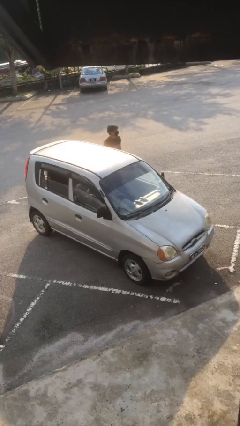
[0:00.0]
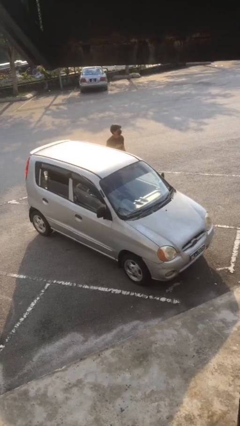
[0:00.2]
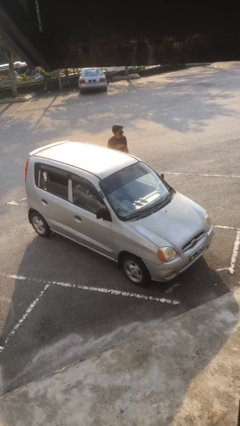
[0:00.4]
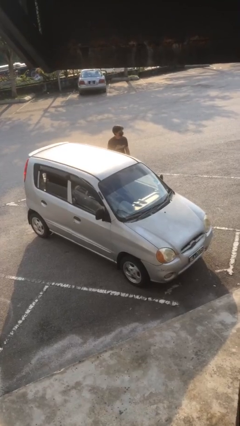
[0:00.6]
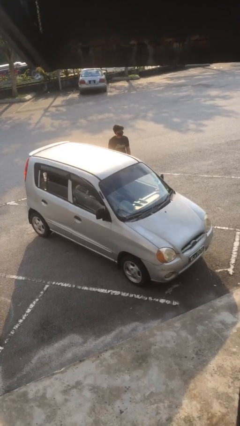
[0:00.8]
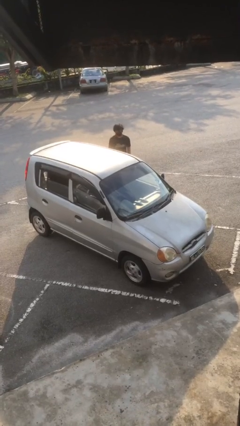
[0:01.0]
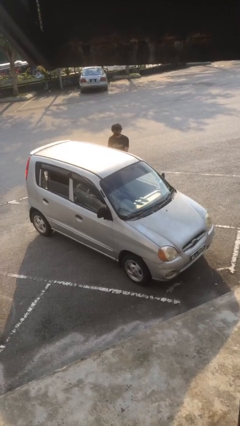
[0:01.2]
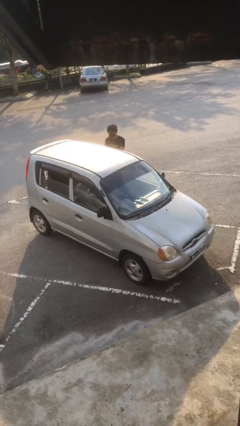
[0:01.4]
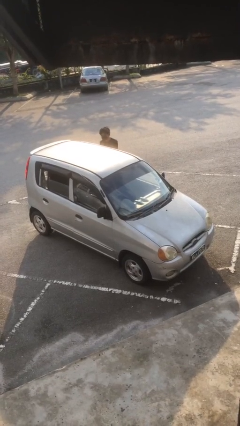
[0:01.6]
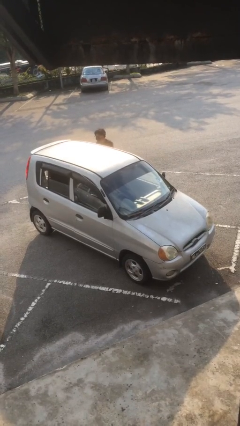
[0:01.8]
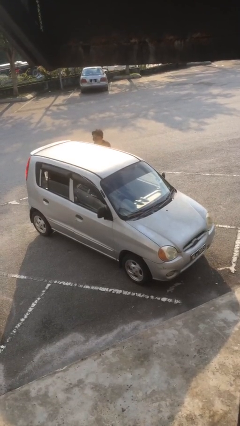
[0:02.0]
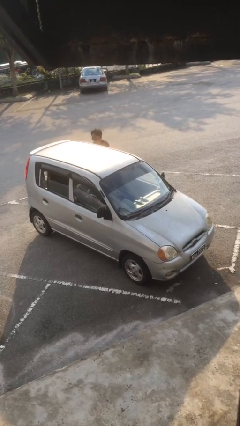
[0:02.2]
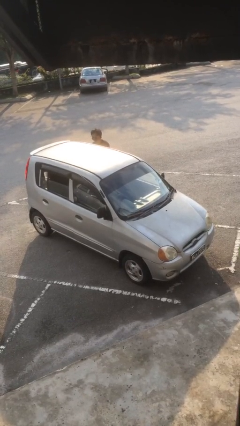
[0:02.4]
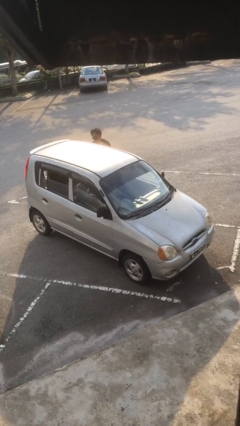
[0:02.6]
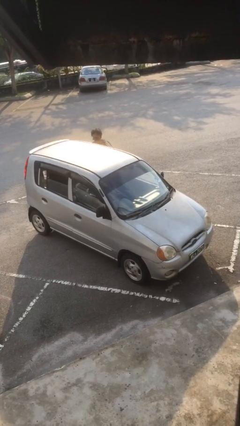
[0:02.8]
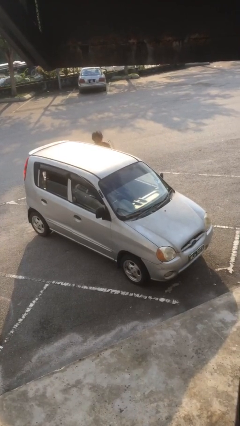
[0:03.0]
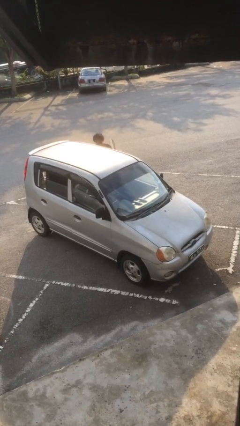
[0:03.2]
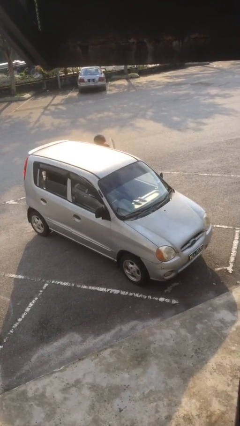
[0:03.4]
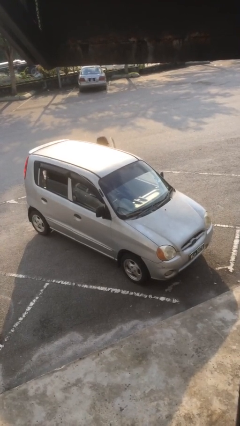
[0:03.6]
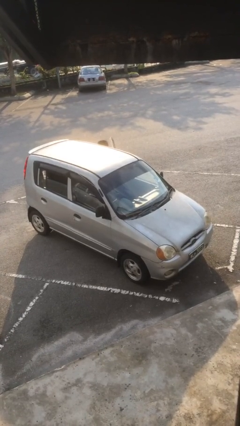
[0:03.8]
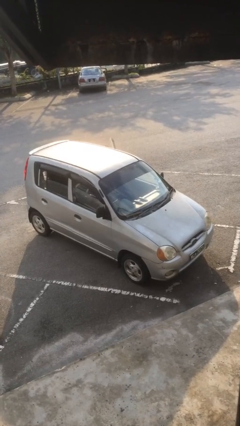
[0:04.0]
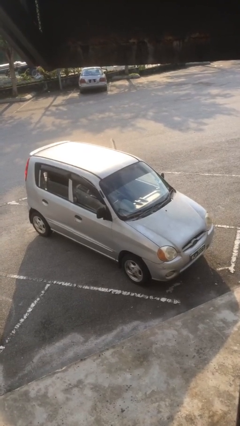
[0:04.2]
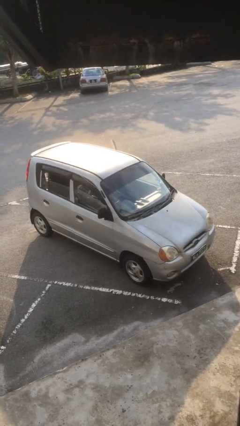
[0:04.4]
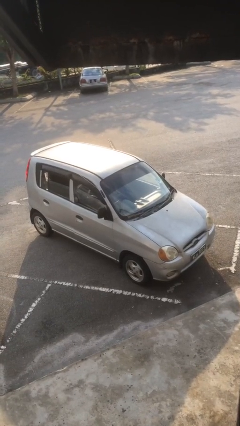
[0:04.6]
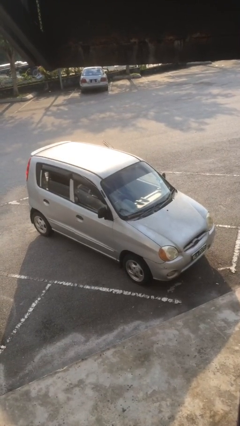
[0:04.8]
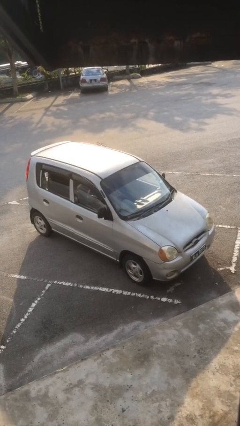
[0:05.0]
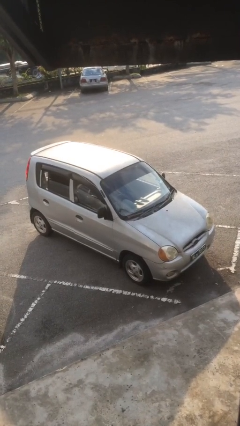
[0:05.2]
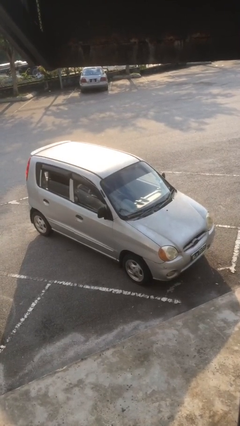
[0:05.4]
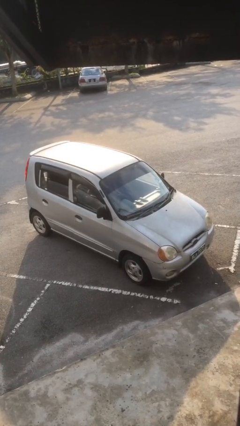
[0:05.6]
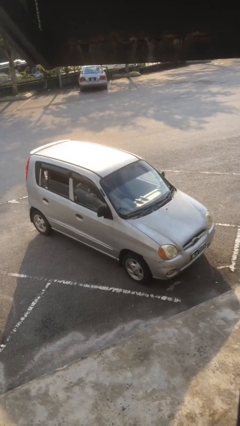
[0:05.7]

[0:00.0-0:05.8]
car picks up person

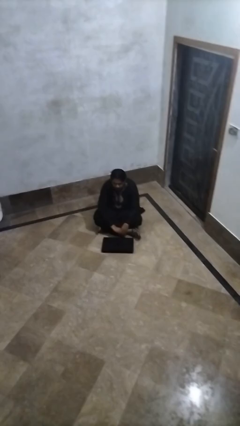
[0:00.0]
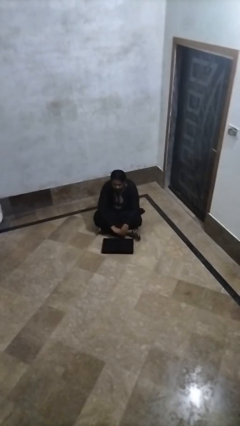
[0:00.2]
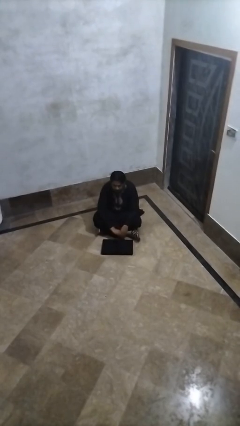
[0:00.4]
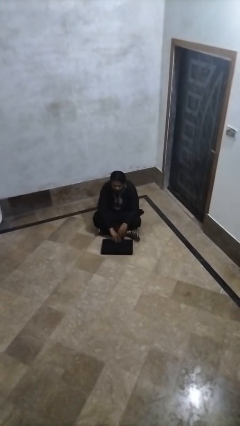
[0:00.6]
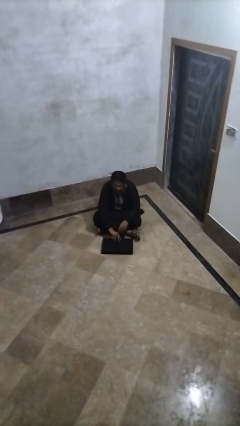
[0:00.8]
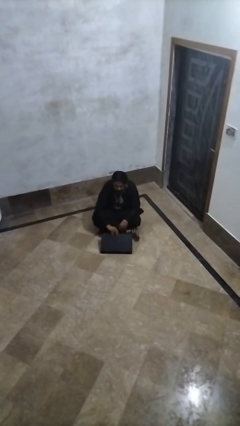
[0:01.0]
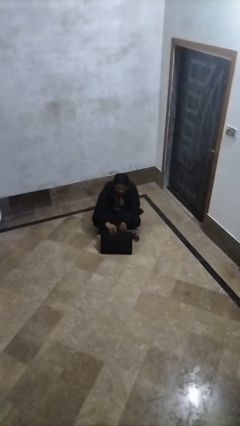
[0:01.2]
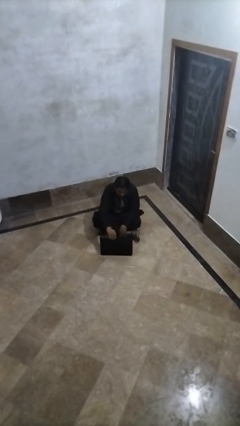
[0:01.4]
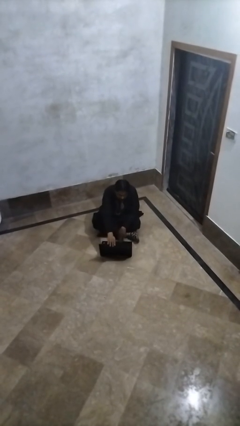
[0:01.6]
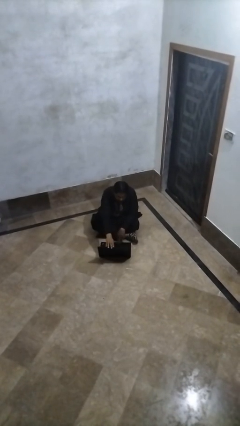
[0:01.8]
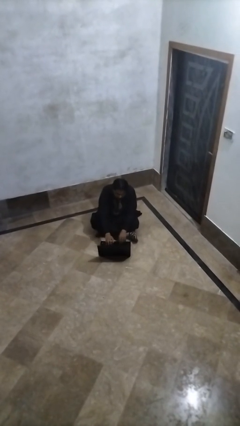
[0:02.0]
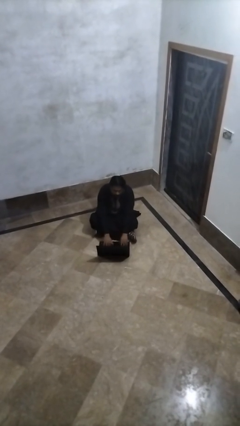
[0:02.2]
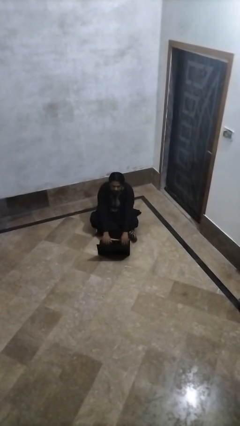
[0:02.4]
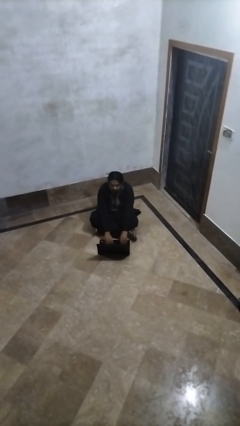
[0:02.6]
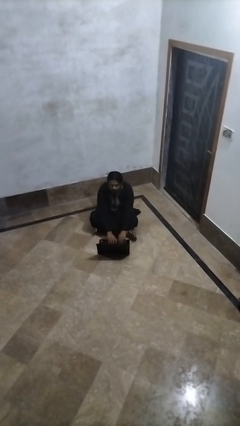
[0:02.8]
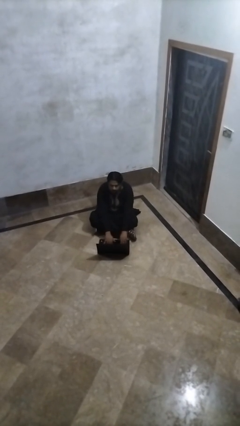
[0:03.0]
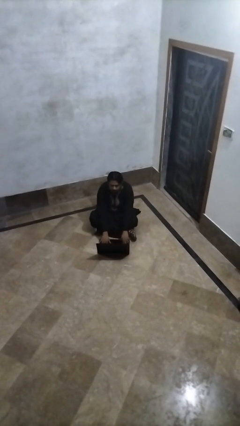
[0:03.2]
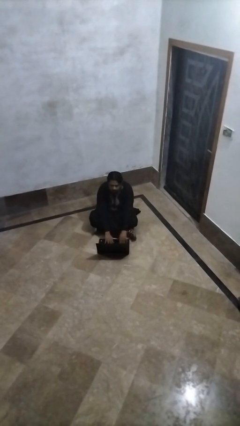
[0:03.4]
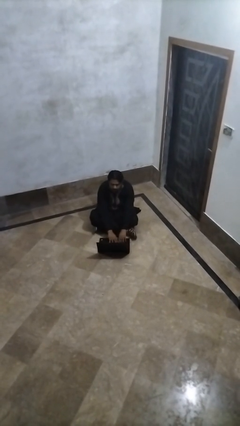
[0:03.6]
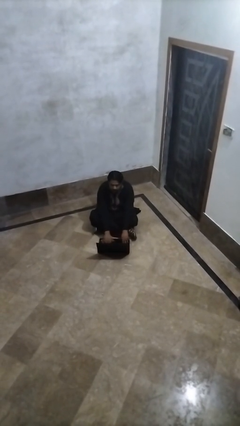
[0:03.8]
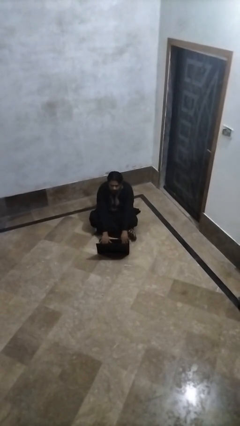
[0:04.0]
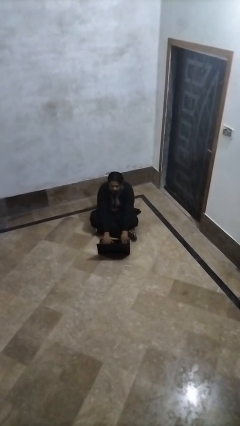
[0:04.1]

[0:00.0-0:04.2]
person opens laptop

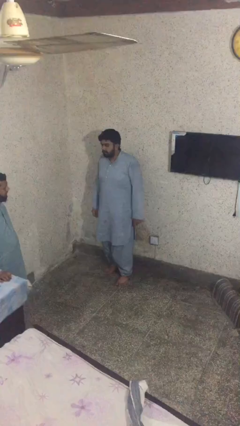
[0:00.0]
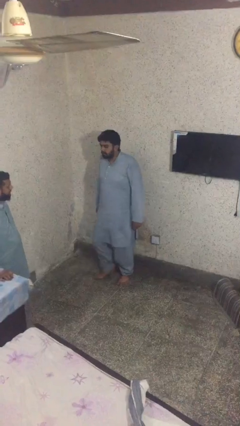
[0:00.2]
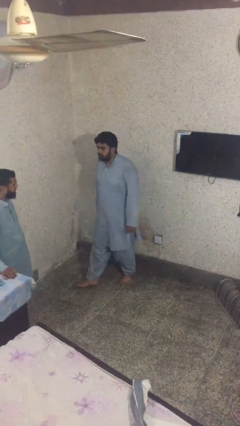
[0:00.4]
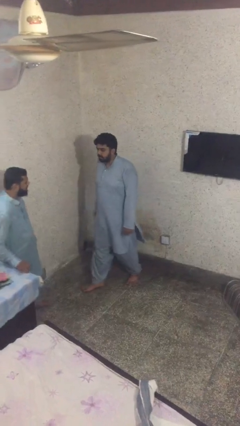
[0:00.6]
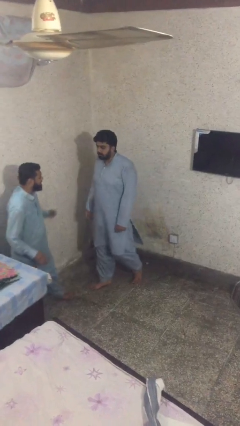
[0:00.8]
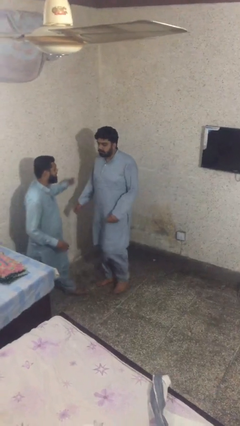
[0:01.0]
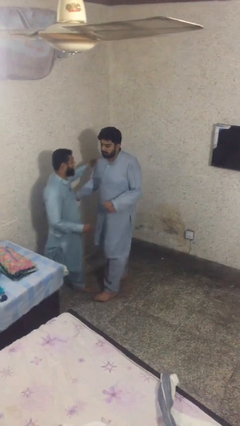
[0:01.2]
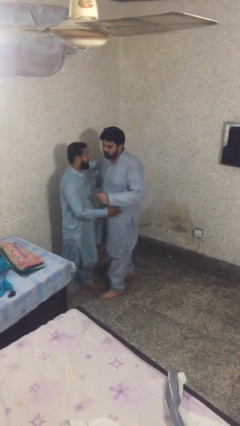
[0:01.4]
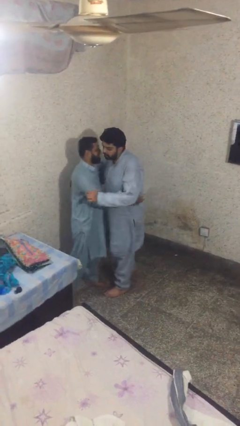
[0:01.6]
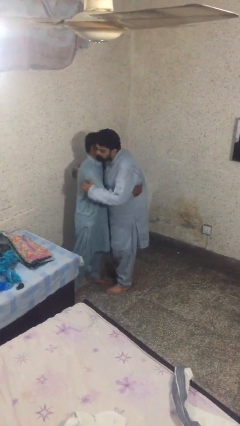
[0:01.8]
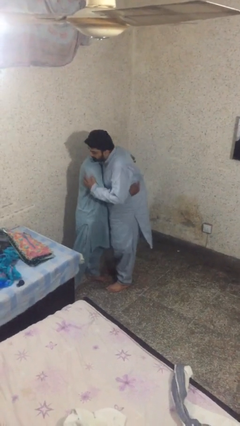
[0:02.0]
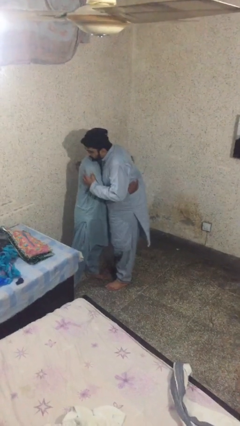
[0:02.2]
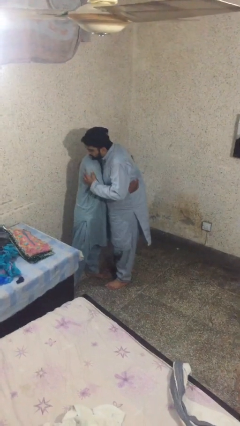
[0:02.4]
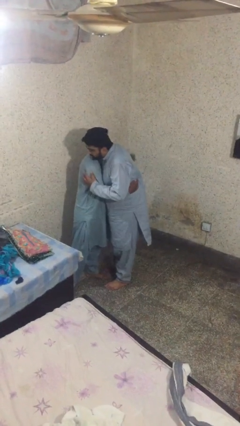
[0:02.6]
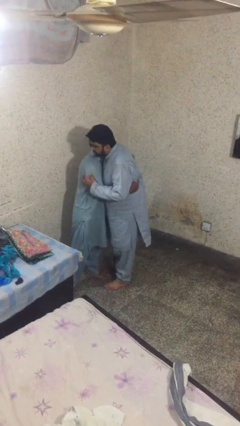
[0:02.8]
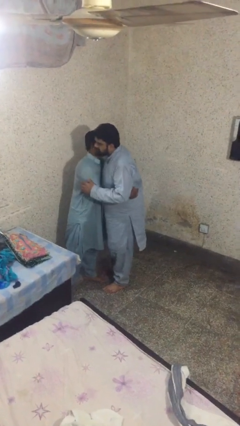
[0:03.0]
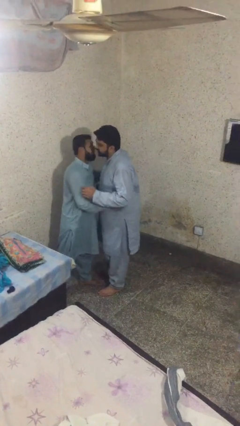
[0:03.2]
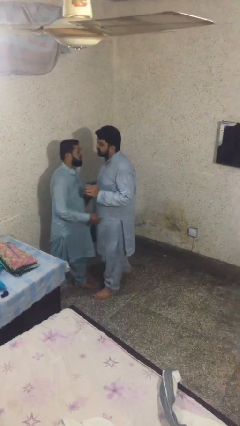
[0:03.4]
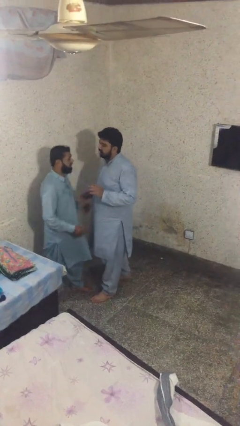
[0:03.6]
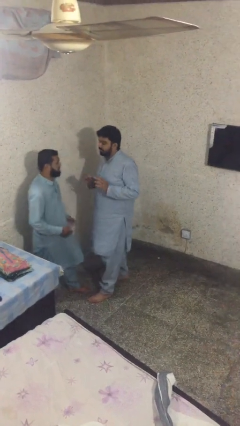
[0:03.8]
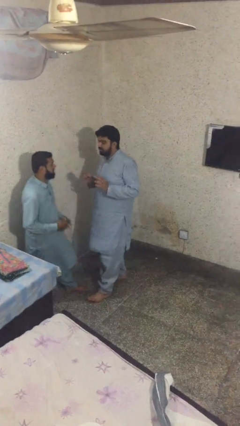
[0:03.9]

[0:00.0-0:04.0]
person embraces person

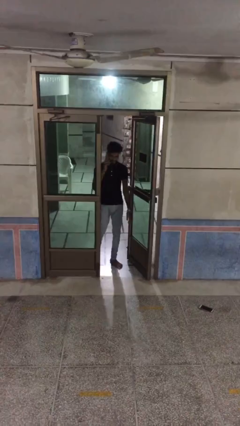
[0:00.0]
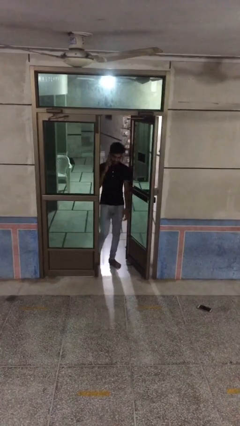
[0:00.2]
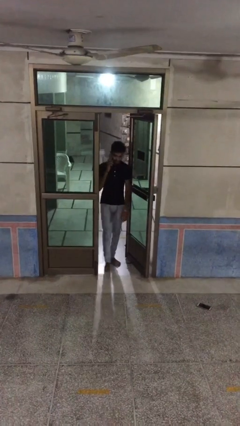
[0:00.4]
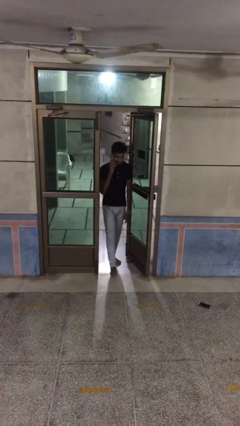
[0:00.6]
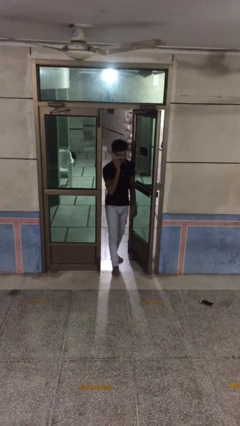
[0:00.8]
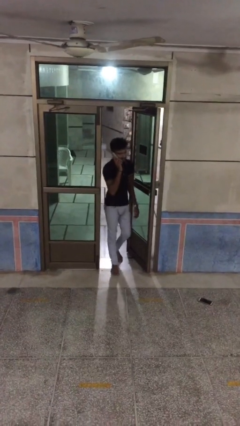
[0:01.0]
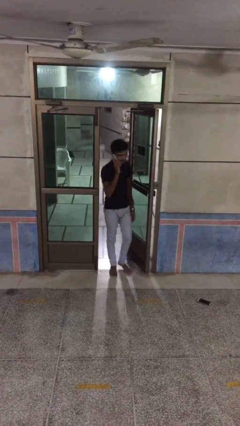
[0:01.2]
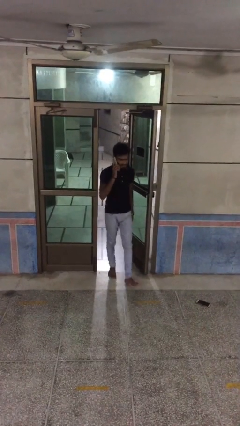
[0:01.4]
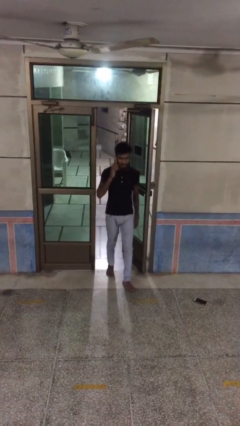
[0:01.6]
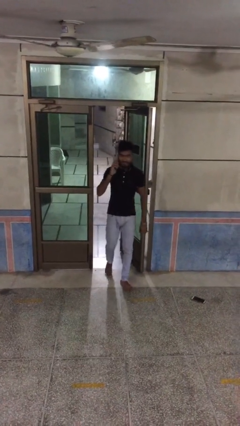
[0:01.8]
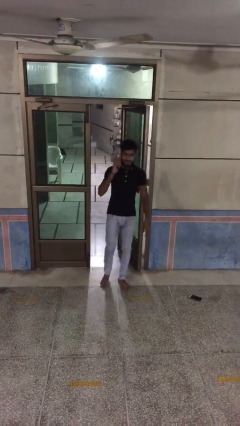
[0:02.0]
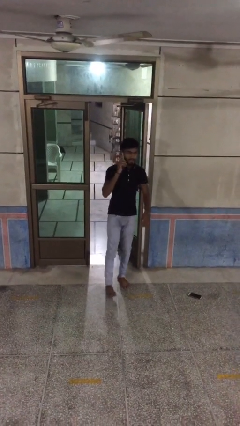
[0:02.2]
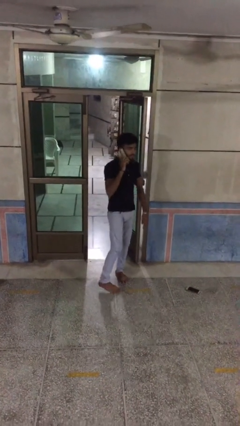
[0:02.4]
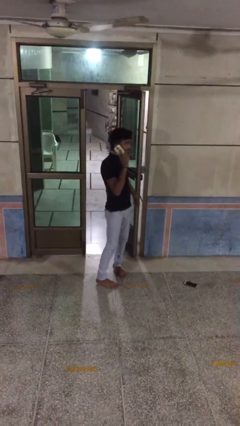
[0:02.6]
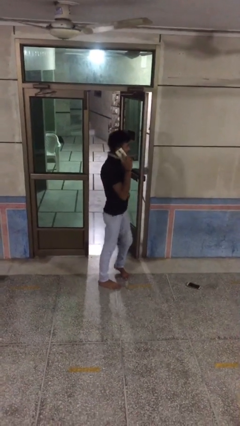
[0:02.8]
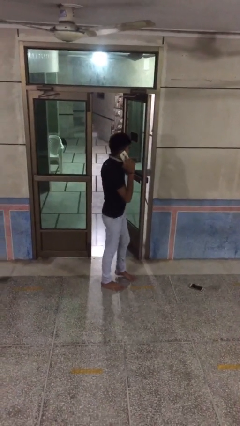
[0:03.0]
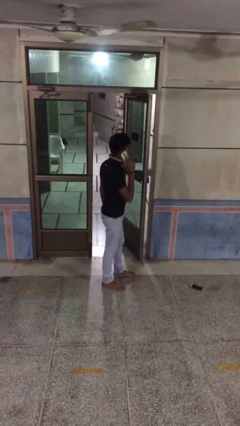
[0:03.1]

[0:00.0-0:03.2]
person enters scene through structure

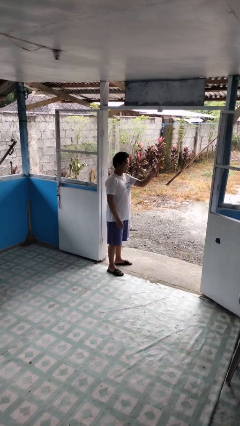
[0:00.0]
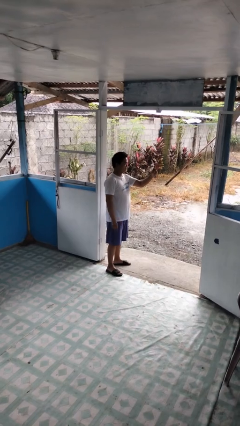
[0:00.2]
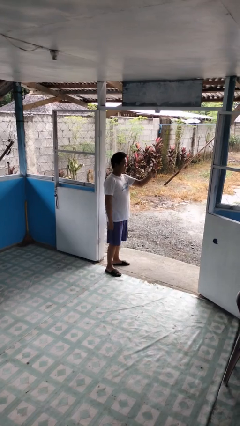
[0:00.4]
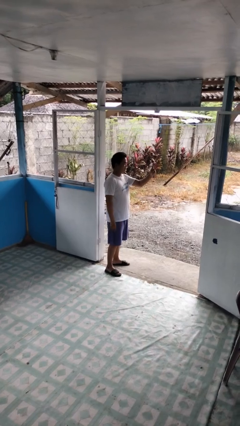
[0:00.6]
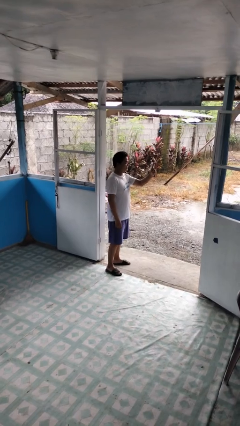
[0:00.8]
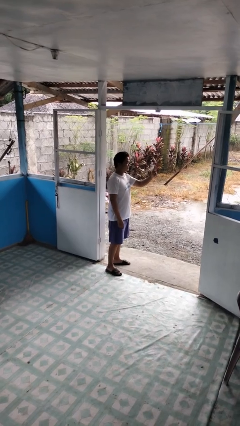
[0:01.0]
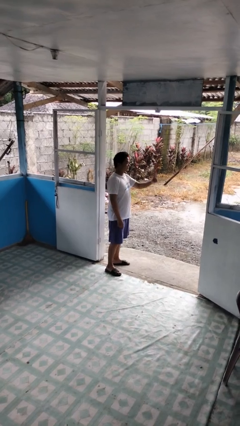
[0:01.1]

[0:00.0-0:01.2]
person gestures number one
